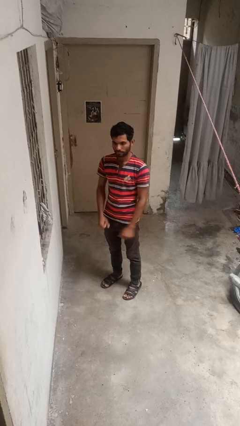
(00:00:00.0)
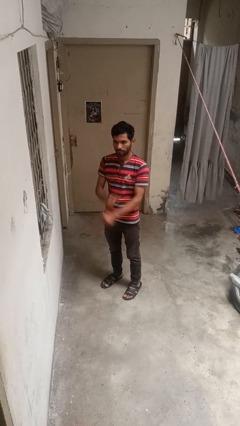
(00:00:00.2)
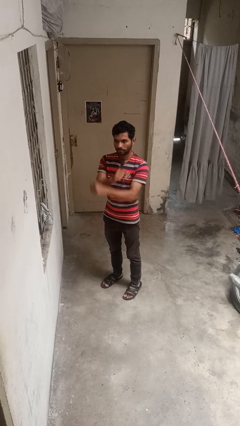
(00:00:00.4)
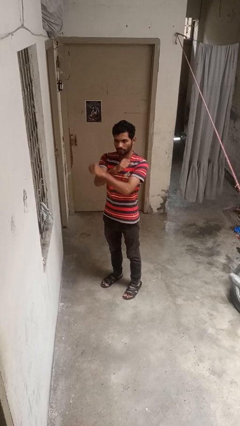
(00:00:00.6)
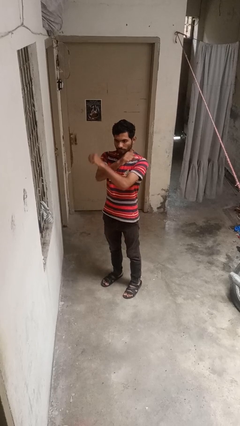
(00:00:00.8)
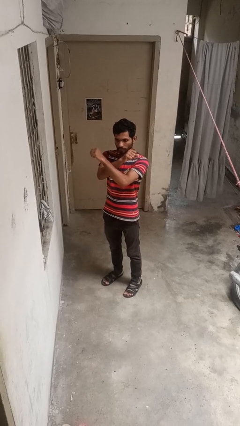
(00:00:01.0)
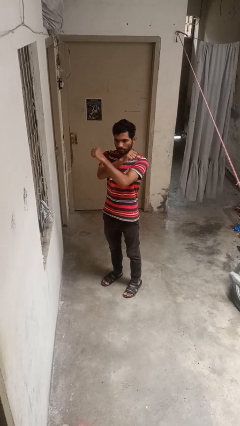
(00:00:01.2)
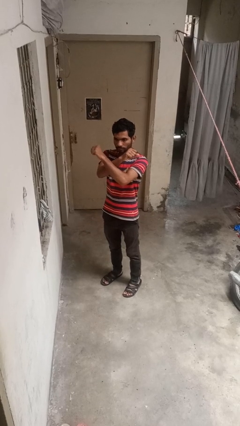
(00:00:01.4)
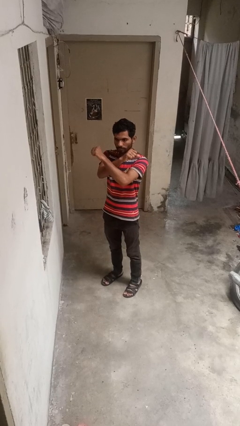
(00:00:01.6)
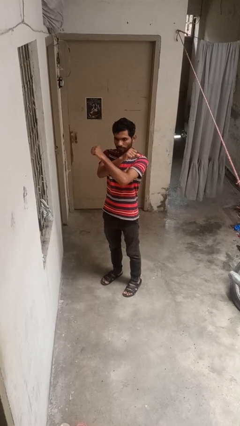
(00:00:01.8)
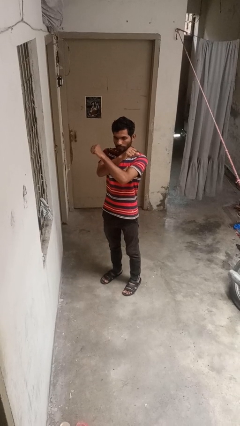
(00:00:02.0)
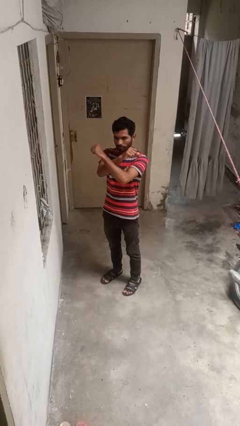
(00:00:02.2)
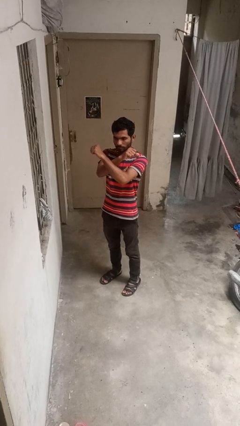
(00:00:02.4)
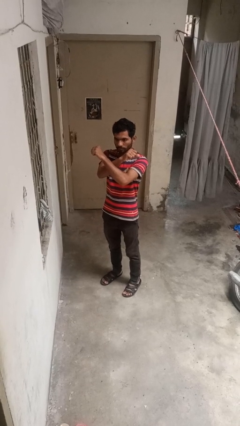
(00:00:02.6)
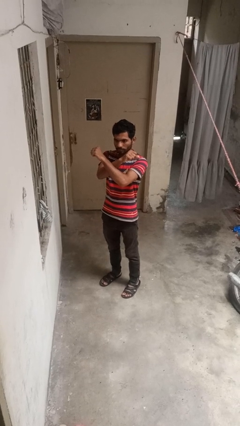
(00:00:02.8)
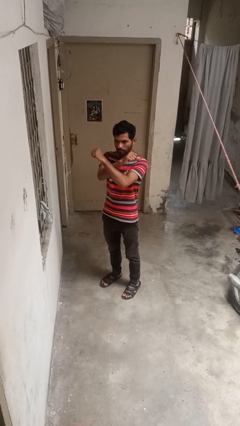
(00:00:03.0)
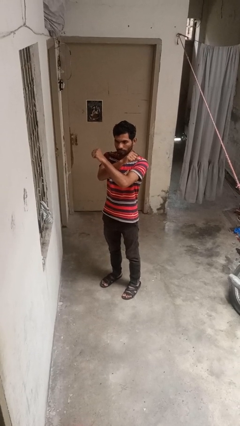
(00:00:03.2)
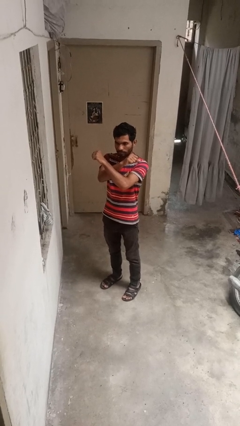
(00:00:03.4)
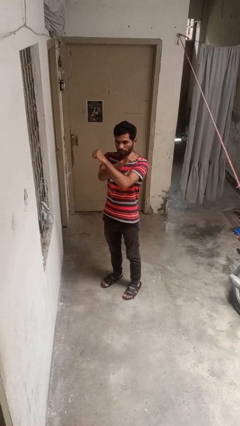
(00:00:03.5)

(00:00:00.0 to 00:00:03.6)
person gestures arms x

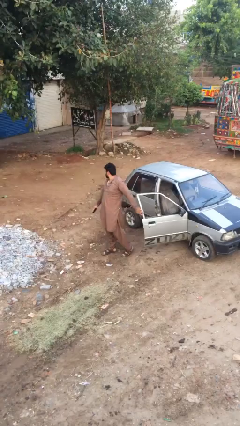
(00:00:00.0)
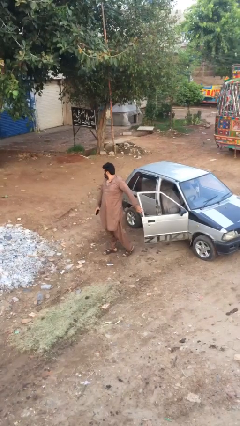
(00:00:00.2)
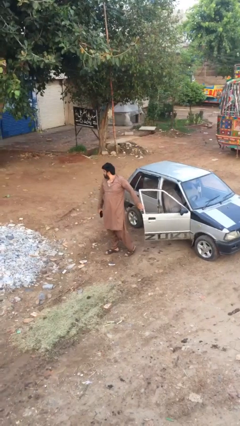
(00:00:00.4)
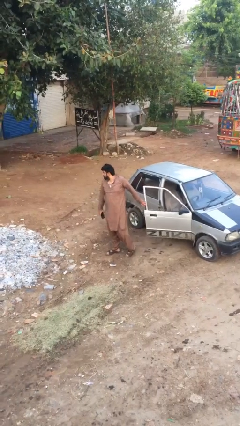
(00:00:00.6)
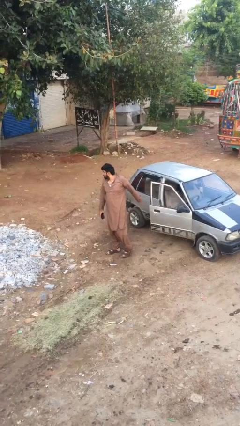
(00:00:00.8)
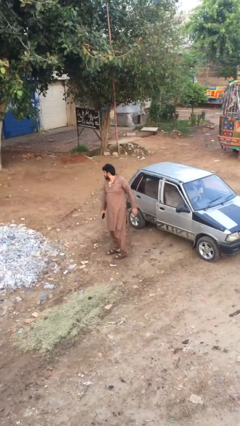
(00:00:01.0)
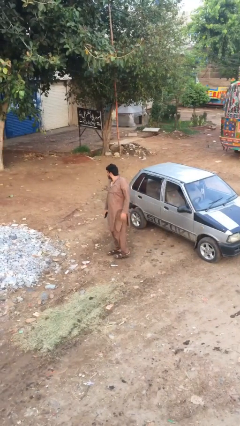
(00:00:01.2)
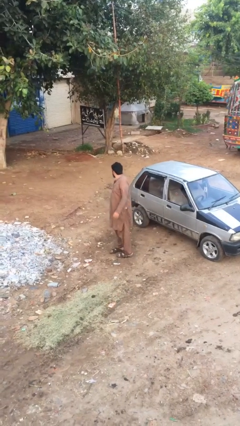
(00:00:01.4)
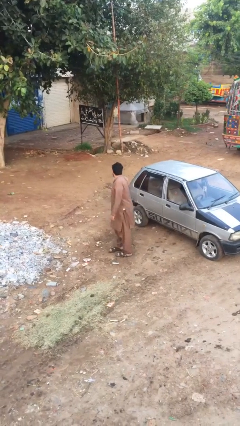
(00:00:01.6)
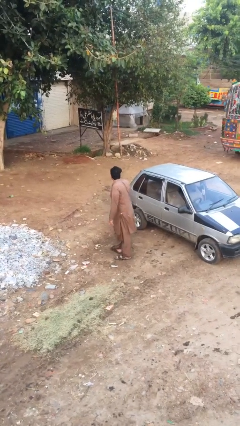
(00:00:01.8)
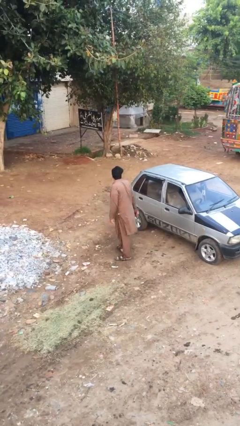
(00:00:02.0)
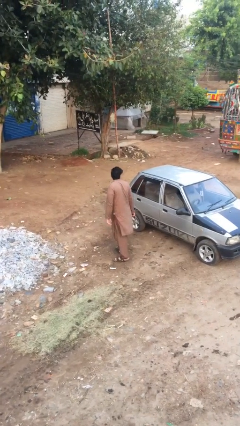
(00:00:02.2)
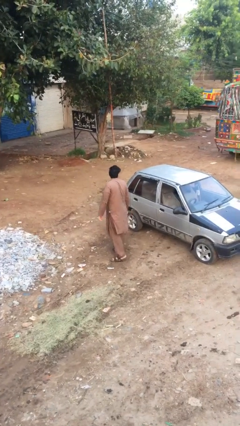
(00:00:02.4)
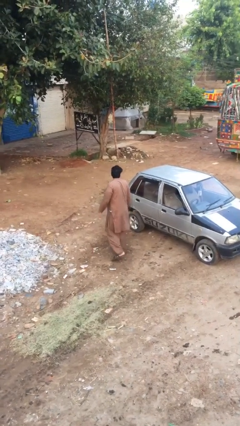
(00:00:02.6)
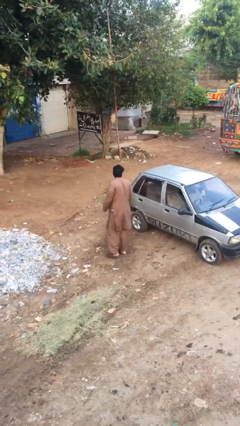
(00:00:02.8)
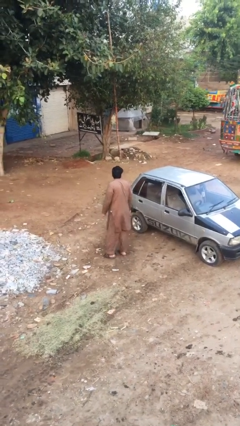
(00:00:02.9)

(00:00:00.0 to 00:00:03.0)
person closes car door

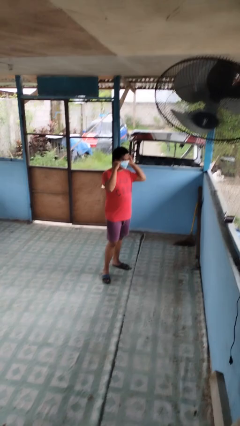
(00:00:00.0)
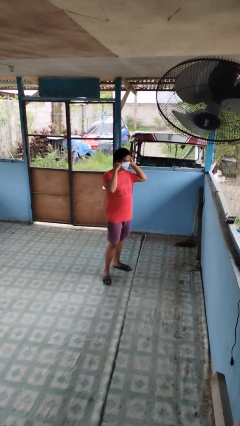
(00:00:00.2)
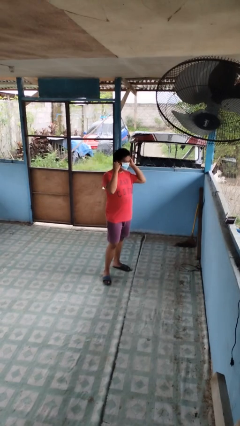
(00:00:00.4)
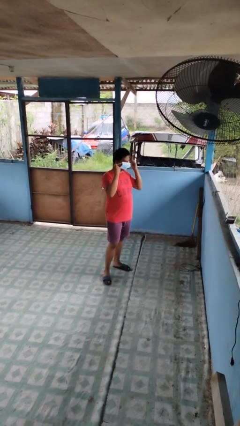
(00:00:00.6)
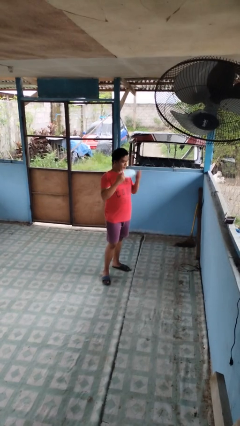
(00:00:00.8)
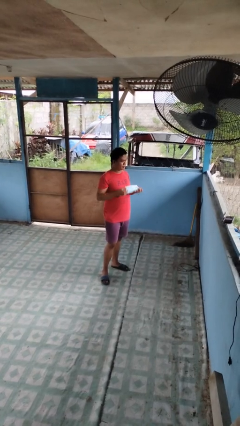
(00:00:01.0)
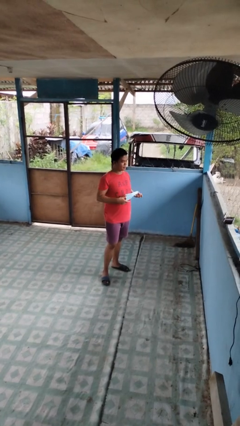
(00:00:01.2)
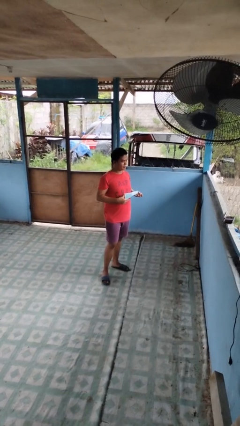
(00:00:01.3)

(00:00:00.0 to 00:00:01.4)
person takes off facemask

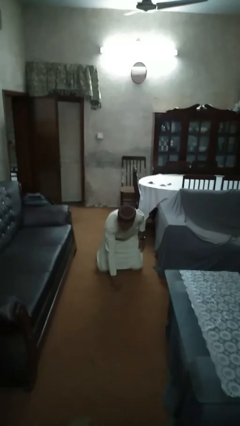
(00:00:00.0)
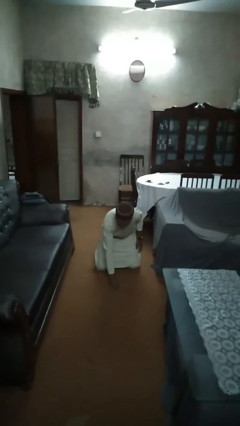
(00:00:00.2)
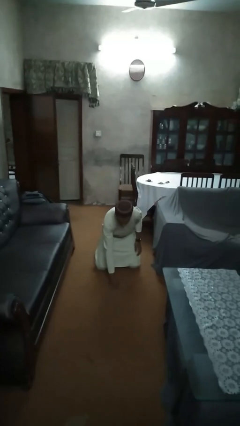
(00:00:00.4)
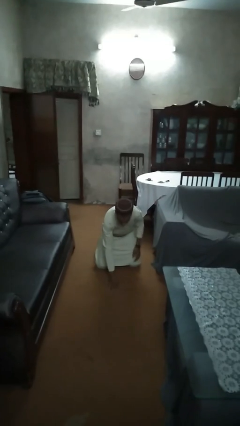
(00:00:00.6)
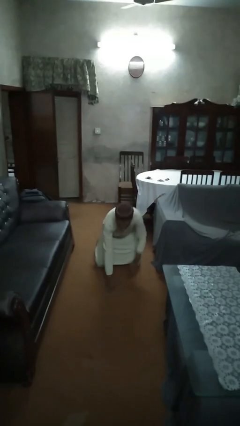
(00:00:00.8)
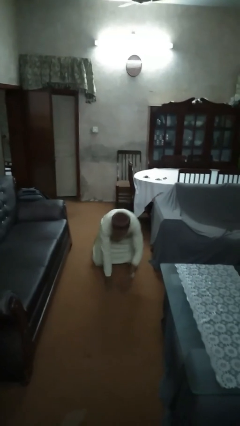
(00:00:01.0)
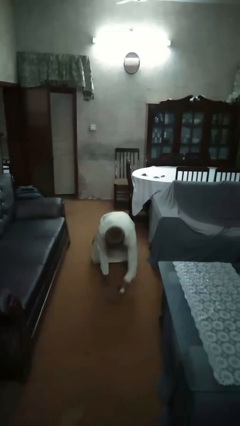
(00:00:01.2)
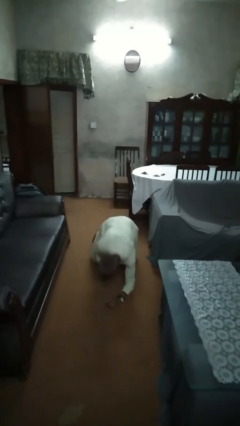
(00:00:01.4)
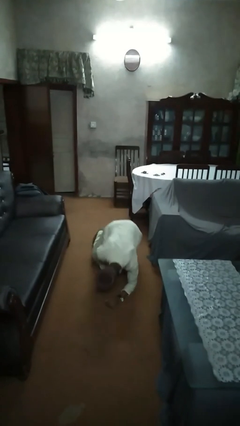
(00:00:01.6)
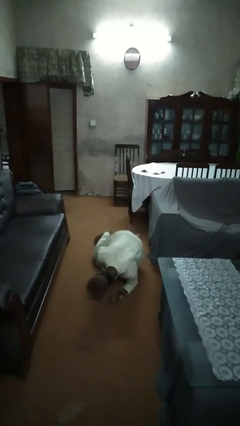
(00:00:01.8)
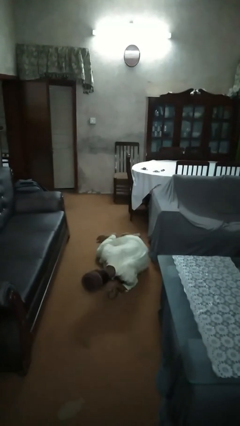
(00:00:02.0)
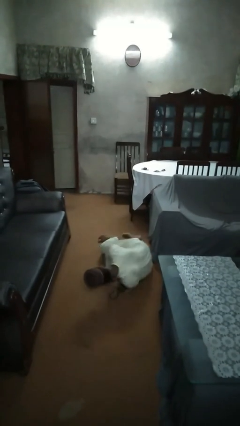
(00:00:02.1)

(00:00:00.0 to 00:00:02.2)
person lies down on floor

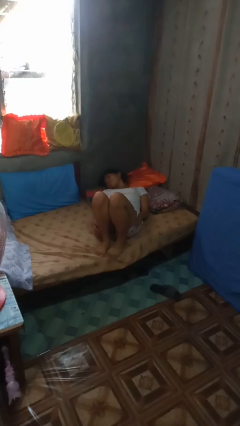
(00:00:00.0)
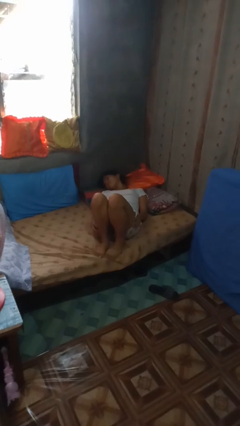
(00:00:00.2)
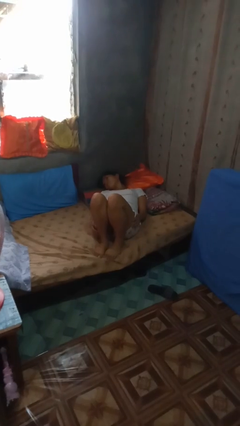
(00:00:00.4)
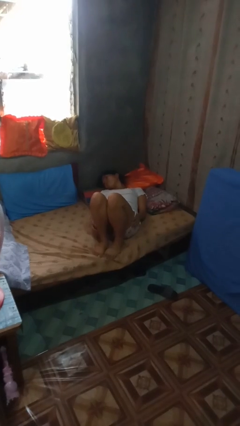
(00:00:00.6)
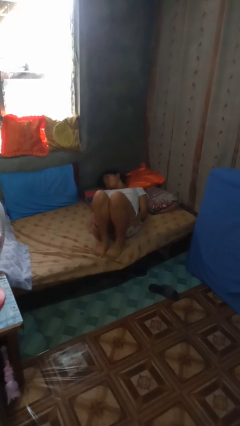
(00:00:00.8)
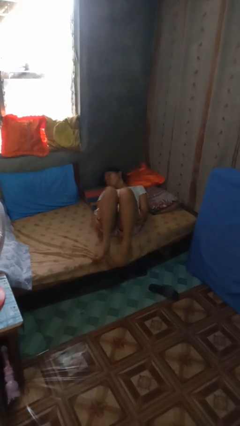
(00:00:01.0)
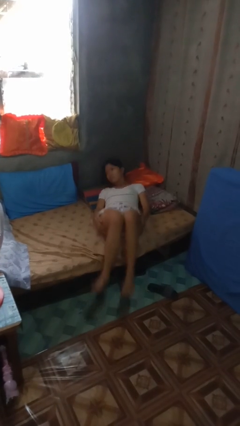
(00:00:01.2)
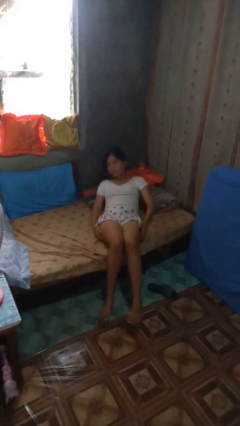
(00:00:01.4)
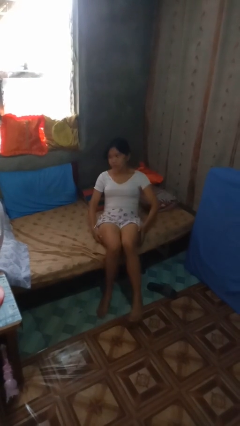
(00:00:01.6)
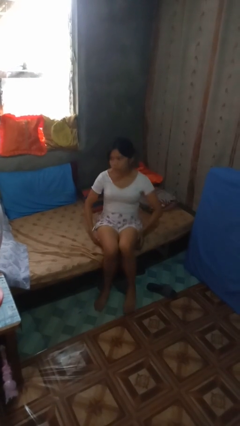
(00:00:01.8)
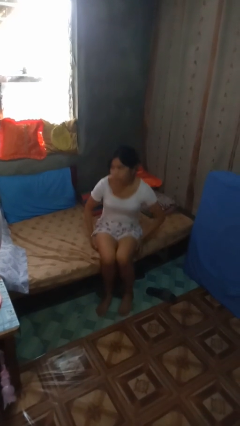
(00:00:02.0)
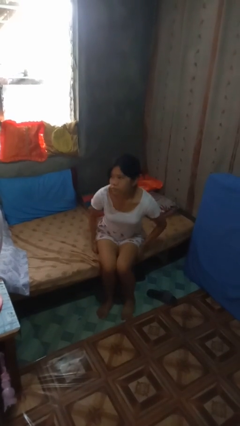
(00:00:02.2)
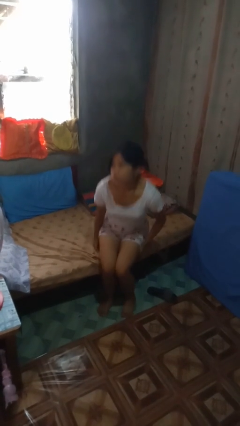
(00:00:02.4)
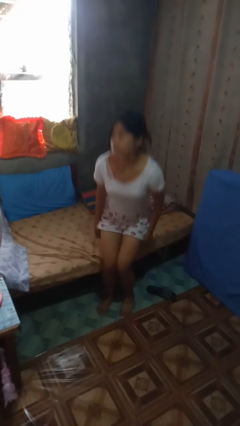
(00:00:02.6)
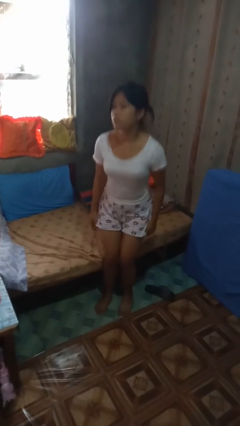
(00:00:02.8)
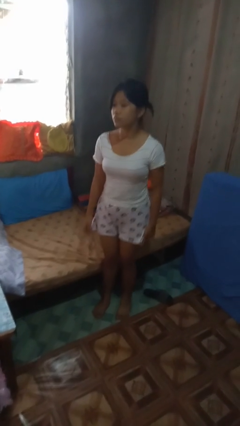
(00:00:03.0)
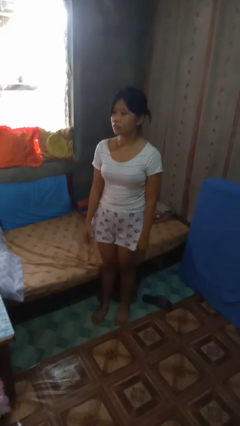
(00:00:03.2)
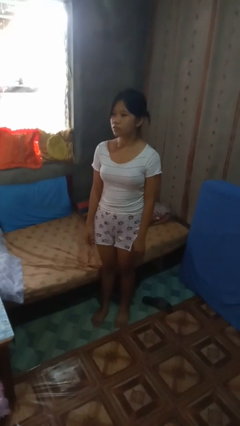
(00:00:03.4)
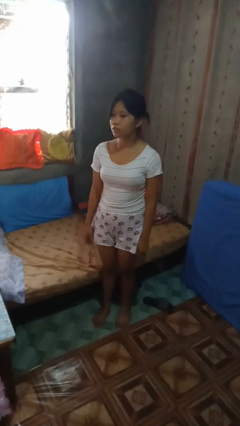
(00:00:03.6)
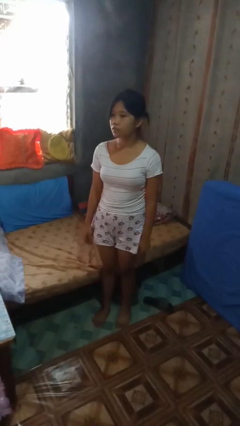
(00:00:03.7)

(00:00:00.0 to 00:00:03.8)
person stands up

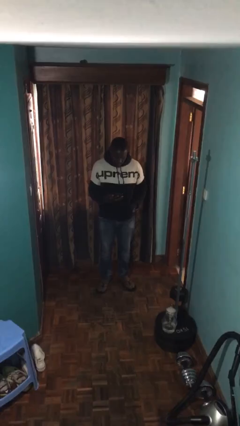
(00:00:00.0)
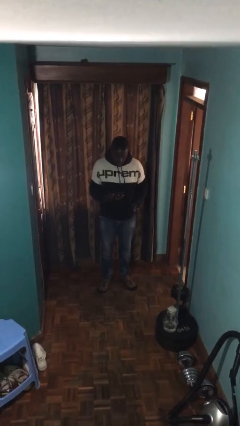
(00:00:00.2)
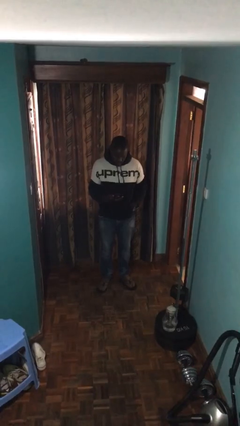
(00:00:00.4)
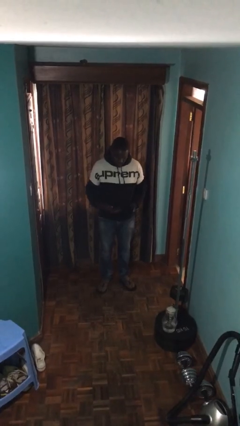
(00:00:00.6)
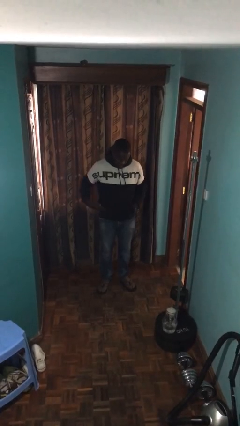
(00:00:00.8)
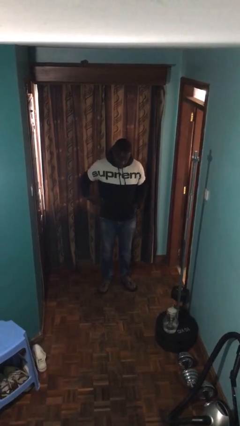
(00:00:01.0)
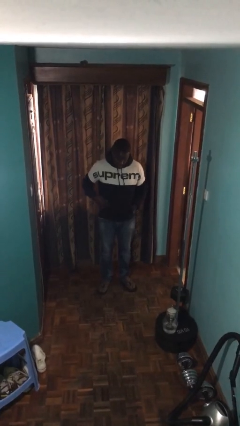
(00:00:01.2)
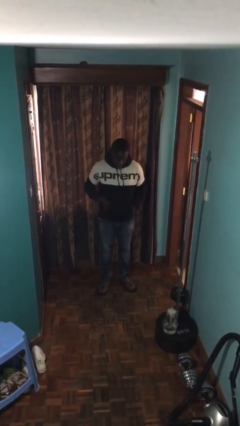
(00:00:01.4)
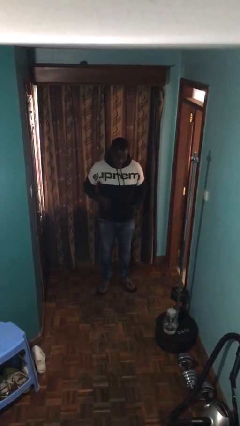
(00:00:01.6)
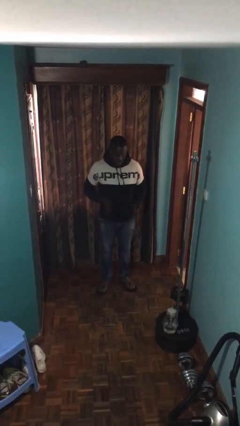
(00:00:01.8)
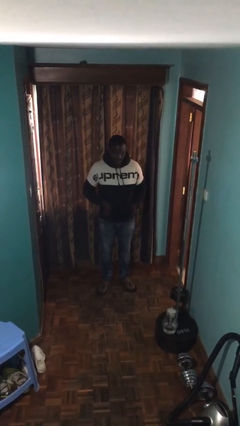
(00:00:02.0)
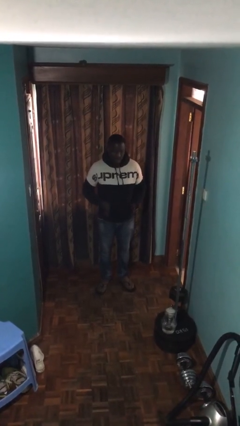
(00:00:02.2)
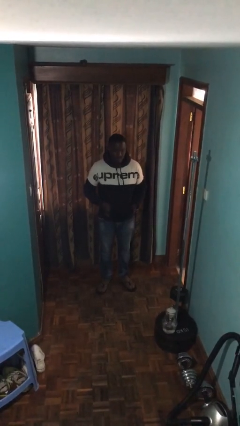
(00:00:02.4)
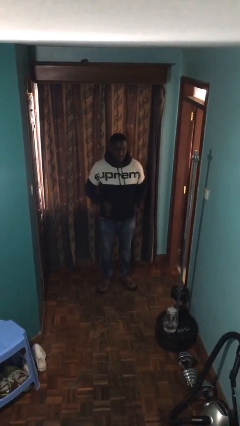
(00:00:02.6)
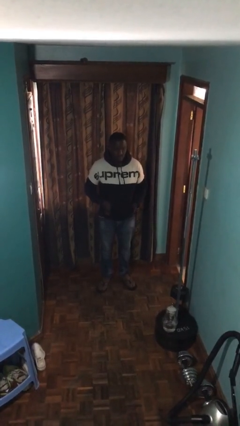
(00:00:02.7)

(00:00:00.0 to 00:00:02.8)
person puts phone into pocket

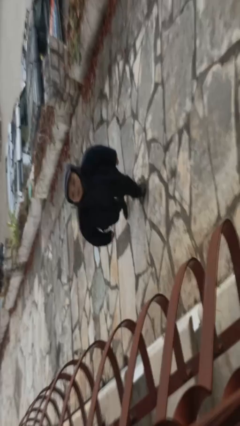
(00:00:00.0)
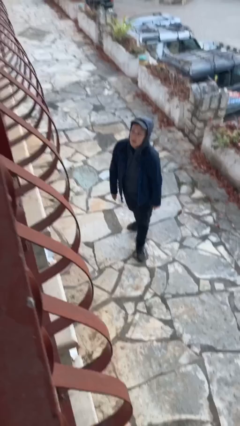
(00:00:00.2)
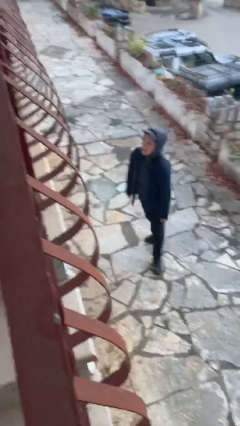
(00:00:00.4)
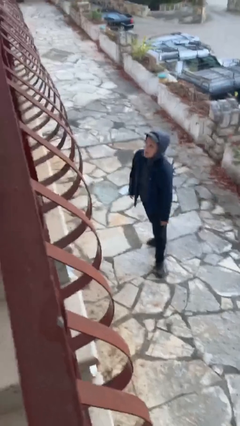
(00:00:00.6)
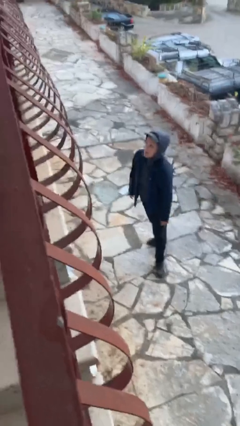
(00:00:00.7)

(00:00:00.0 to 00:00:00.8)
person opens facility door
